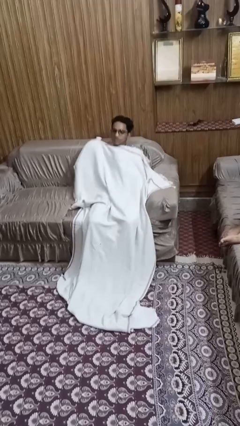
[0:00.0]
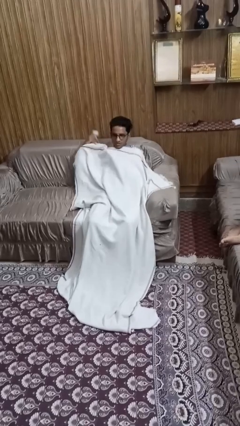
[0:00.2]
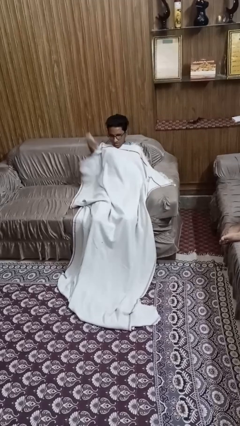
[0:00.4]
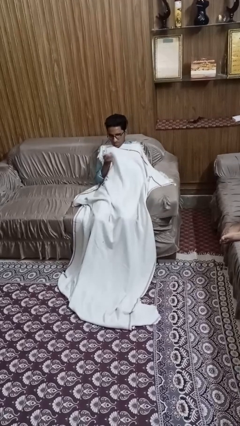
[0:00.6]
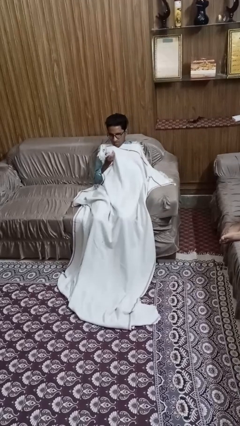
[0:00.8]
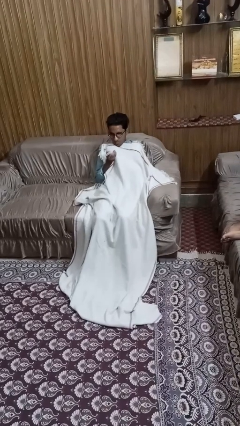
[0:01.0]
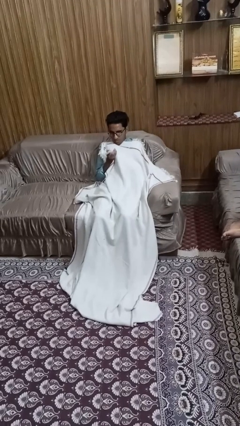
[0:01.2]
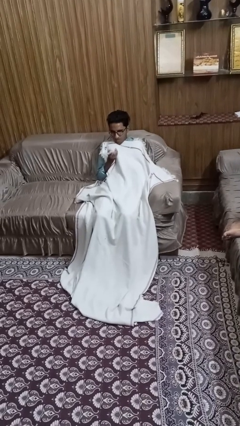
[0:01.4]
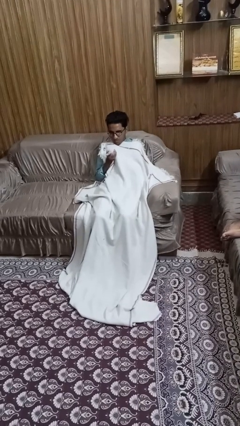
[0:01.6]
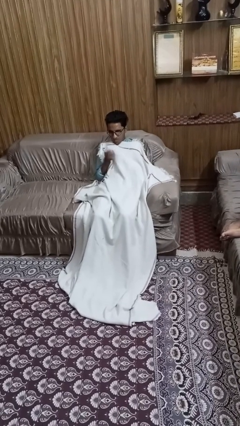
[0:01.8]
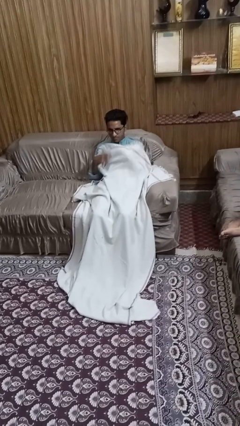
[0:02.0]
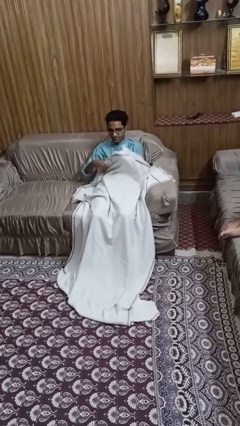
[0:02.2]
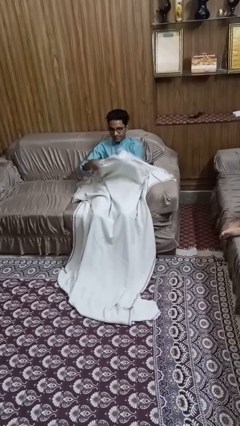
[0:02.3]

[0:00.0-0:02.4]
person covers with blanket

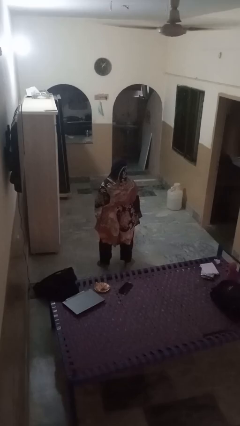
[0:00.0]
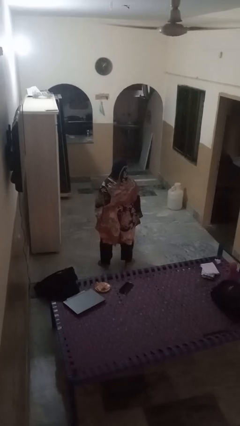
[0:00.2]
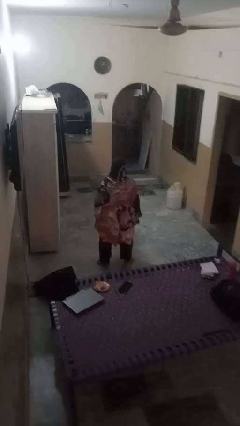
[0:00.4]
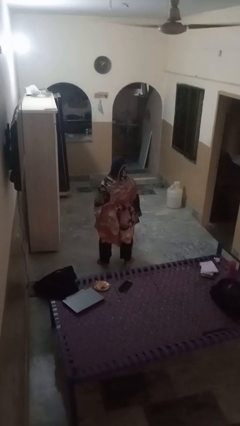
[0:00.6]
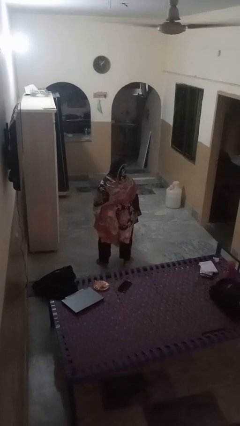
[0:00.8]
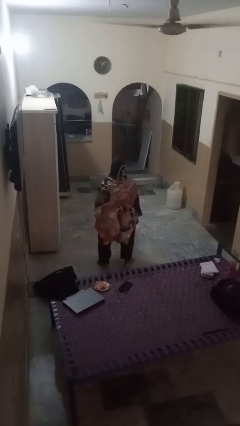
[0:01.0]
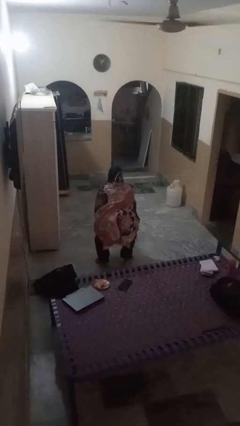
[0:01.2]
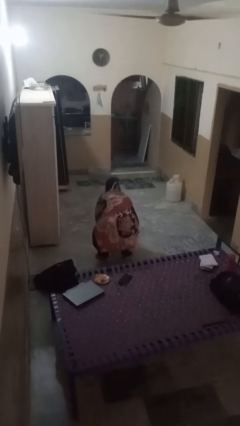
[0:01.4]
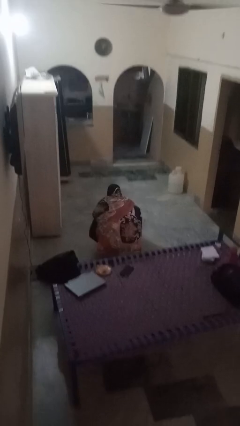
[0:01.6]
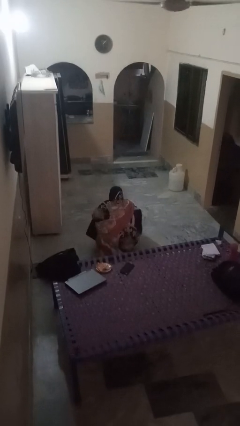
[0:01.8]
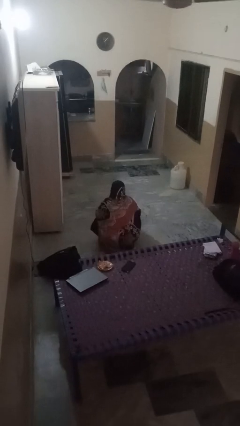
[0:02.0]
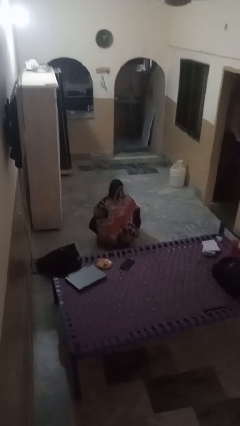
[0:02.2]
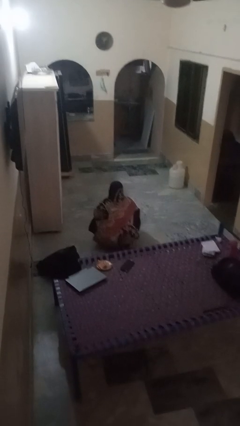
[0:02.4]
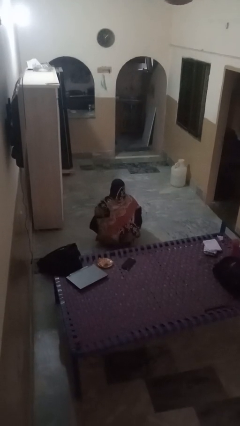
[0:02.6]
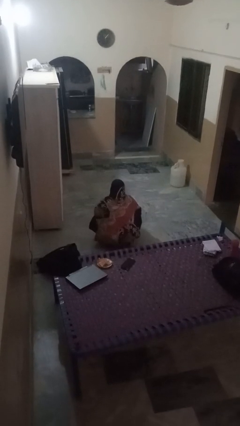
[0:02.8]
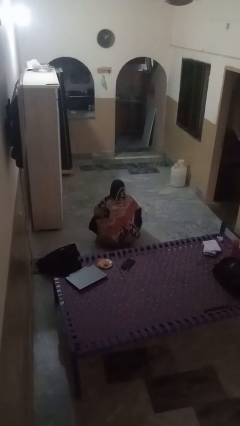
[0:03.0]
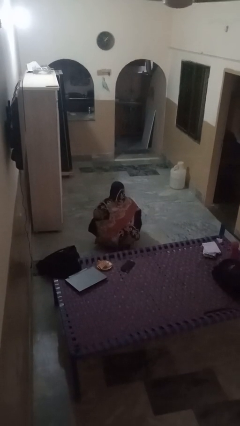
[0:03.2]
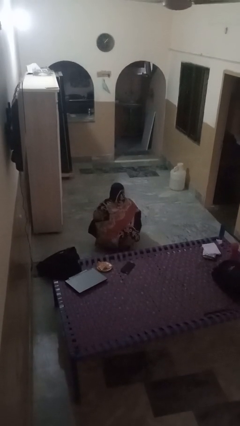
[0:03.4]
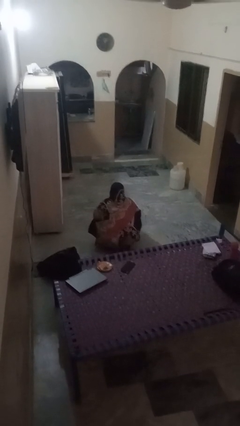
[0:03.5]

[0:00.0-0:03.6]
person squats

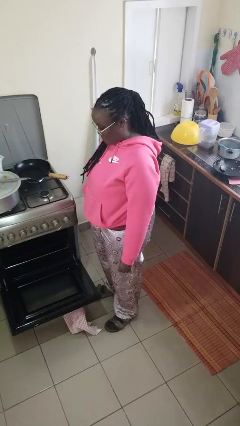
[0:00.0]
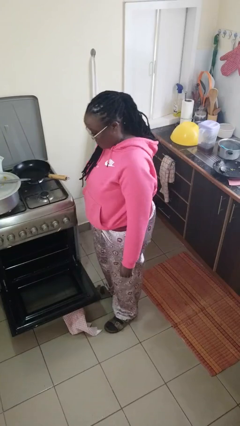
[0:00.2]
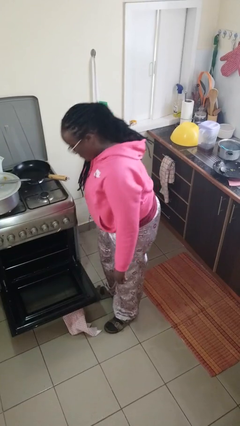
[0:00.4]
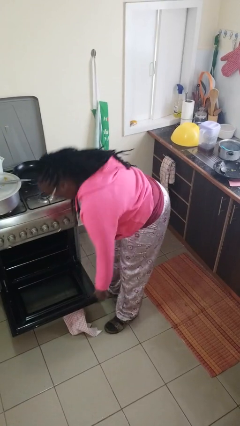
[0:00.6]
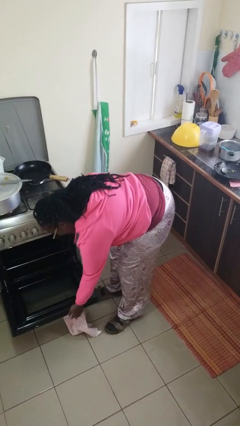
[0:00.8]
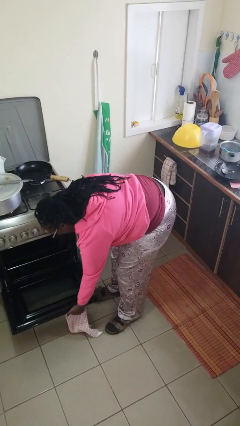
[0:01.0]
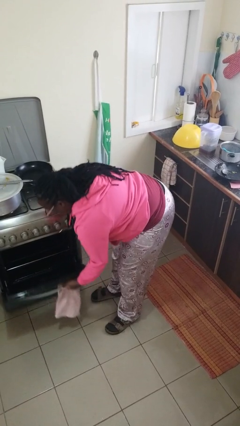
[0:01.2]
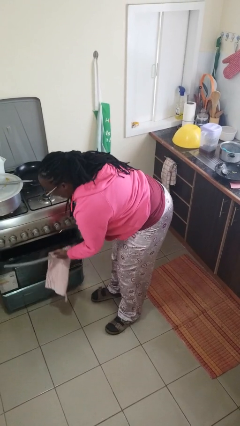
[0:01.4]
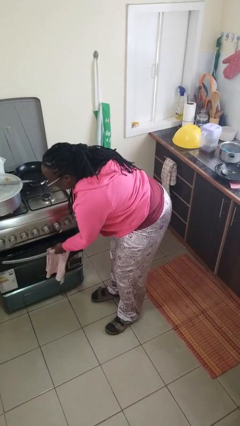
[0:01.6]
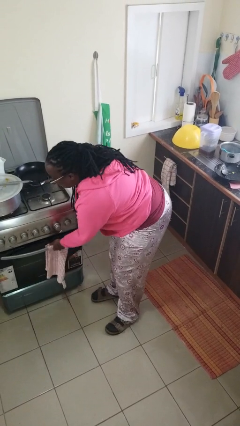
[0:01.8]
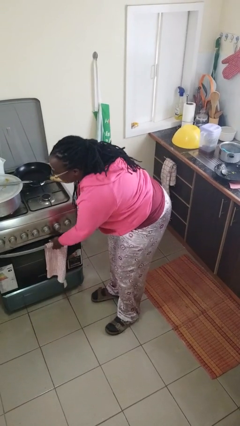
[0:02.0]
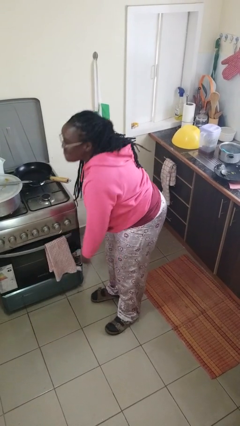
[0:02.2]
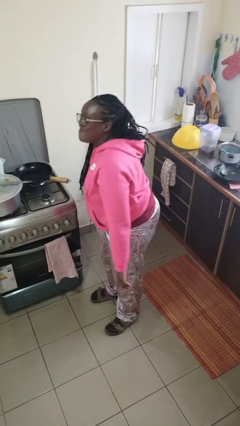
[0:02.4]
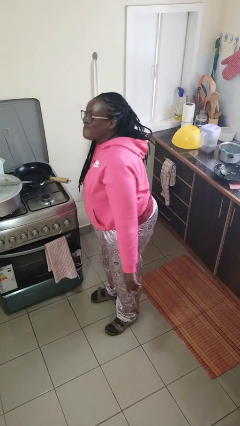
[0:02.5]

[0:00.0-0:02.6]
person closes oven door

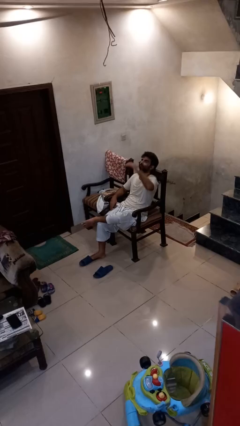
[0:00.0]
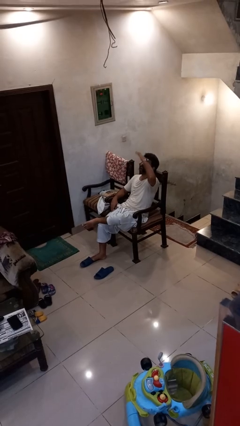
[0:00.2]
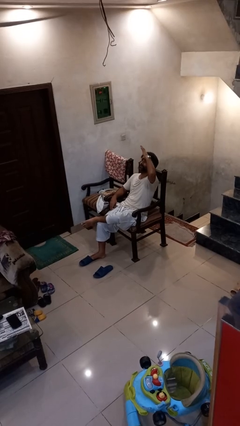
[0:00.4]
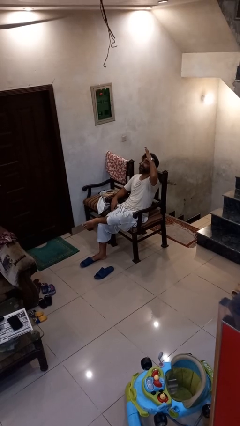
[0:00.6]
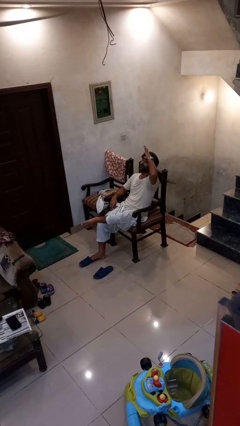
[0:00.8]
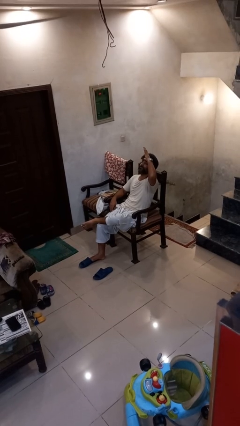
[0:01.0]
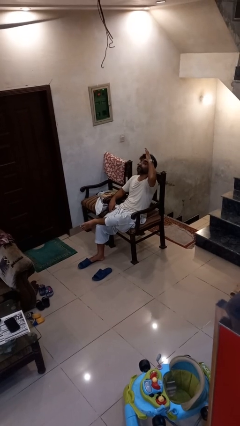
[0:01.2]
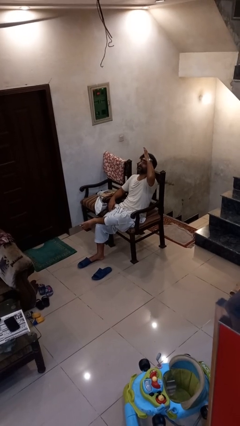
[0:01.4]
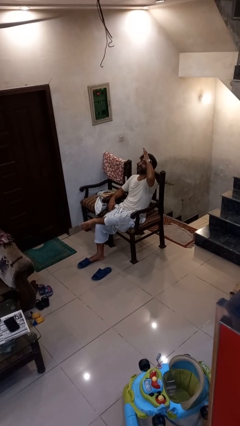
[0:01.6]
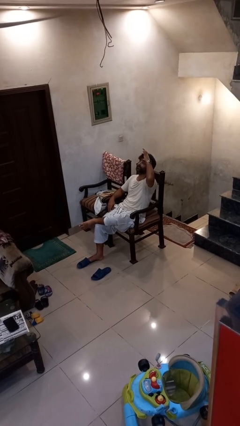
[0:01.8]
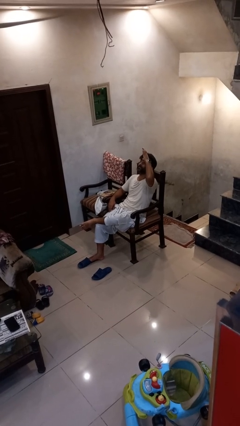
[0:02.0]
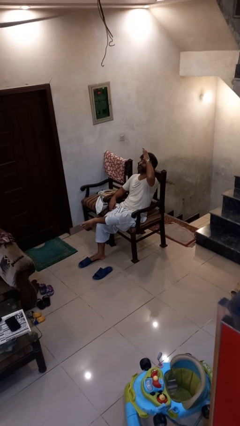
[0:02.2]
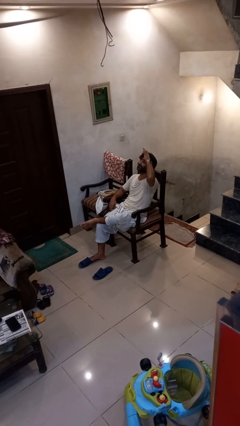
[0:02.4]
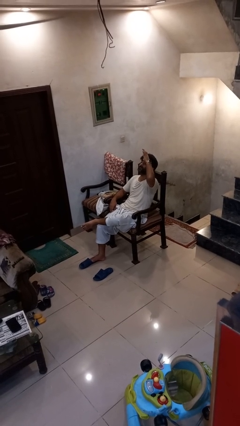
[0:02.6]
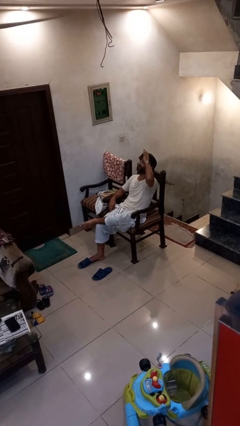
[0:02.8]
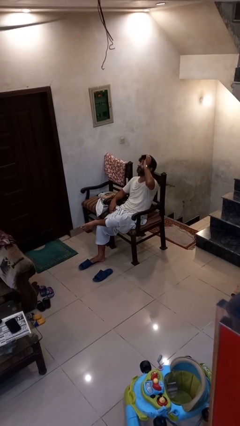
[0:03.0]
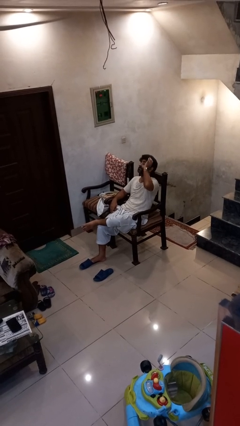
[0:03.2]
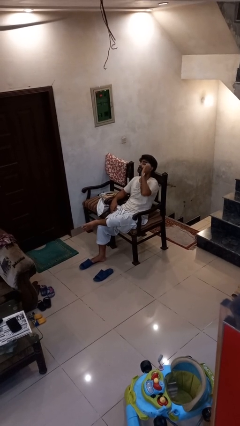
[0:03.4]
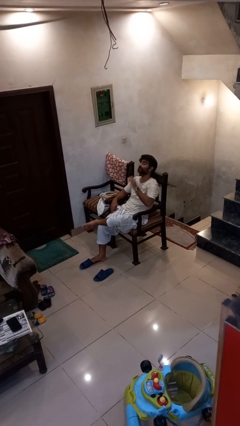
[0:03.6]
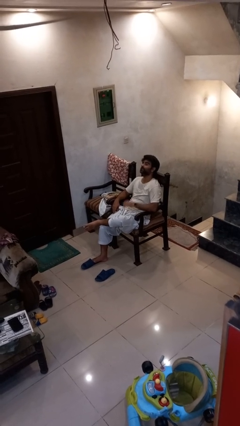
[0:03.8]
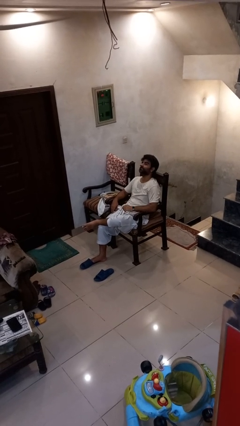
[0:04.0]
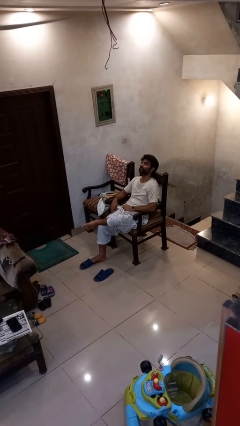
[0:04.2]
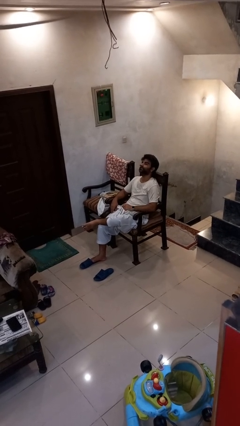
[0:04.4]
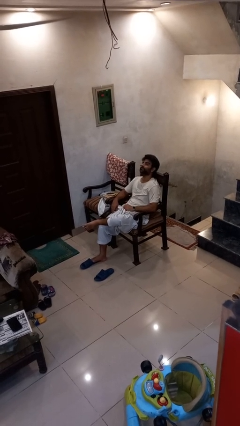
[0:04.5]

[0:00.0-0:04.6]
person cracks knuckles

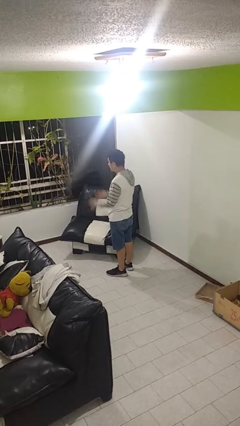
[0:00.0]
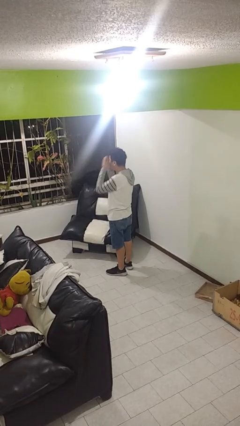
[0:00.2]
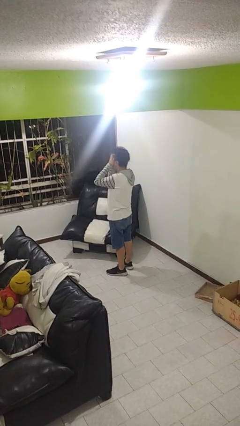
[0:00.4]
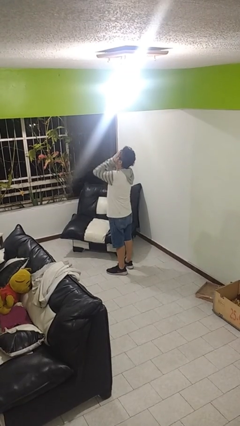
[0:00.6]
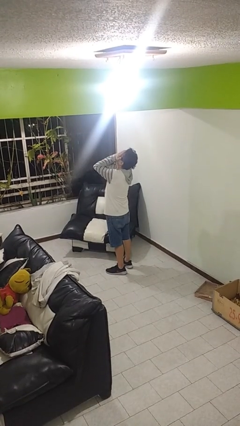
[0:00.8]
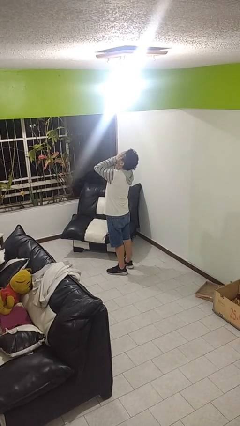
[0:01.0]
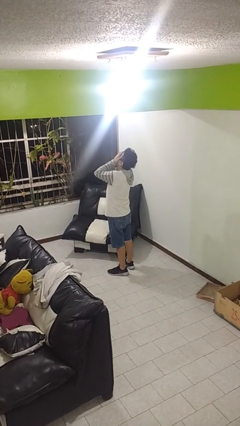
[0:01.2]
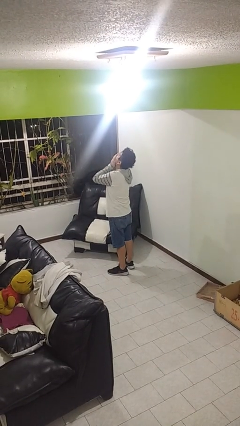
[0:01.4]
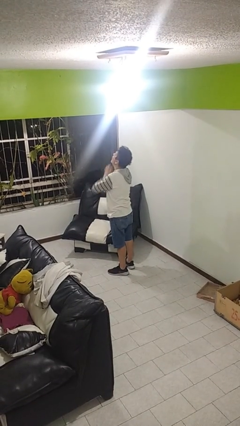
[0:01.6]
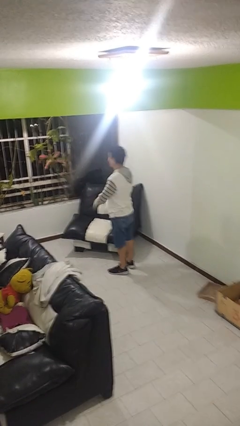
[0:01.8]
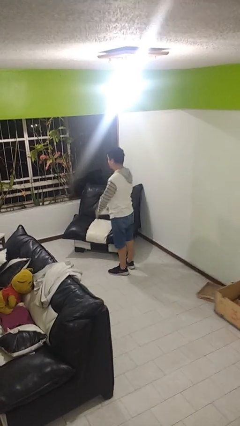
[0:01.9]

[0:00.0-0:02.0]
person covers face with hands

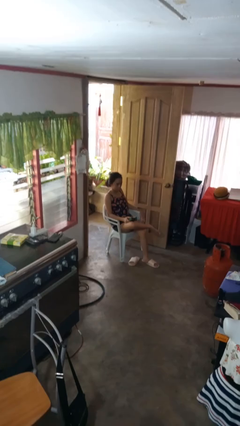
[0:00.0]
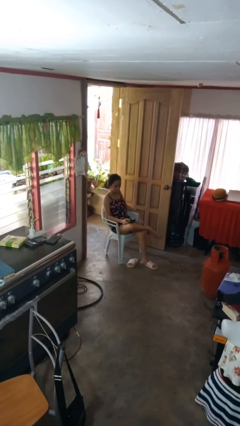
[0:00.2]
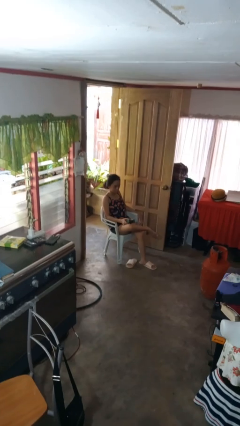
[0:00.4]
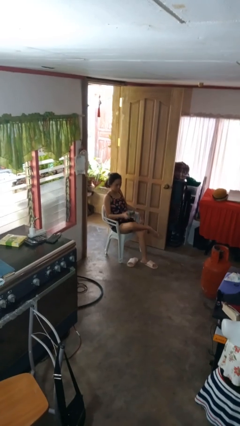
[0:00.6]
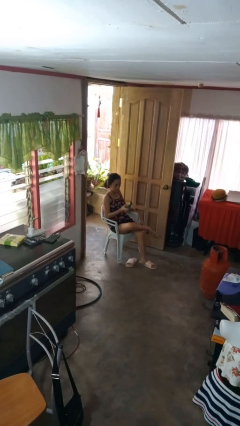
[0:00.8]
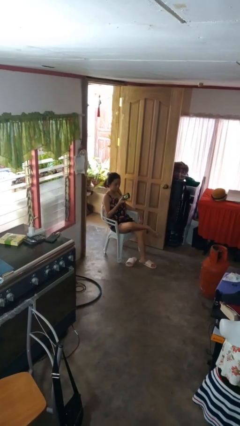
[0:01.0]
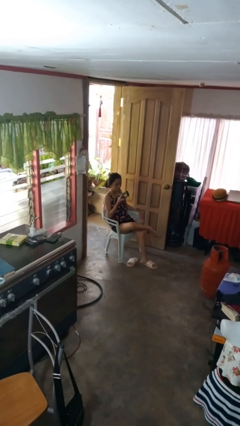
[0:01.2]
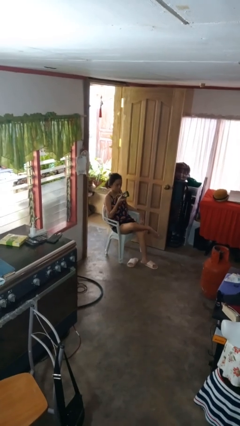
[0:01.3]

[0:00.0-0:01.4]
person uses television remote

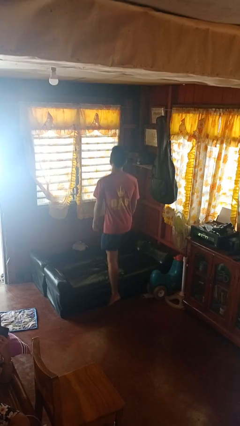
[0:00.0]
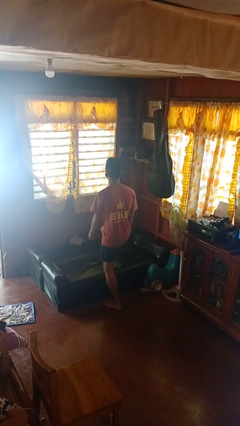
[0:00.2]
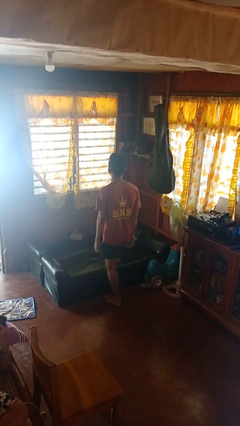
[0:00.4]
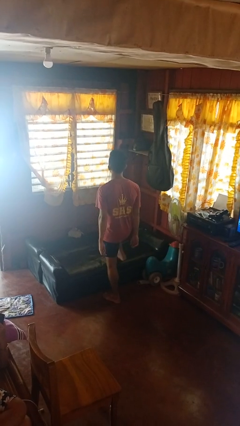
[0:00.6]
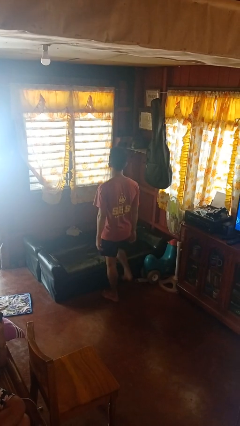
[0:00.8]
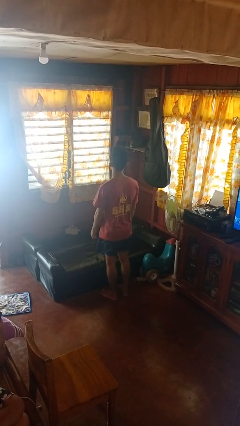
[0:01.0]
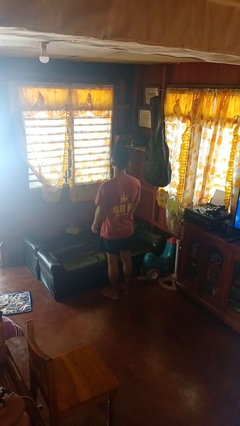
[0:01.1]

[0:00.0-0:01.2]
person climbs off couch
